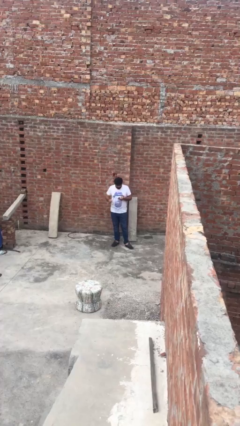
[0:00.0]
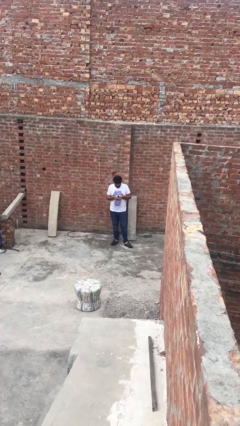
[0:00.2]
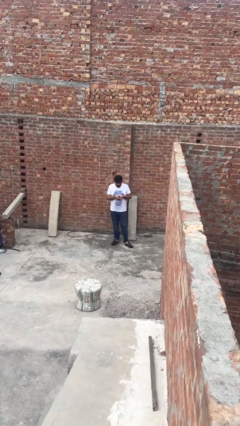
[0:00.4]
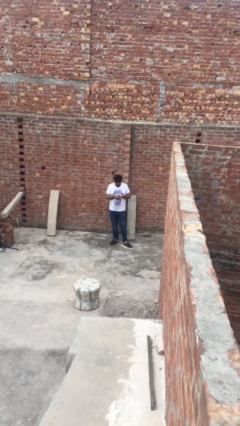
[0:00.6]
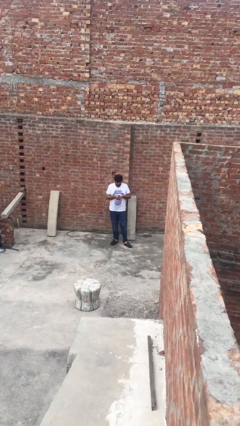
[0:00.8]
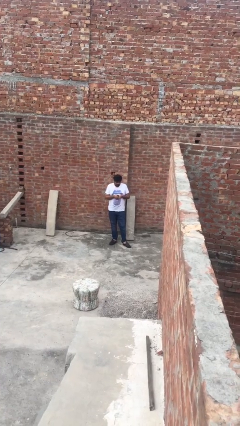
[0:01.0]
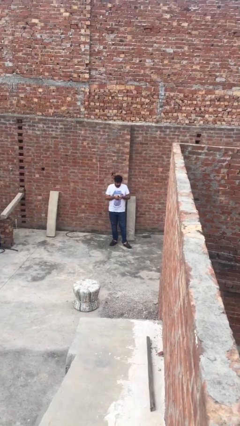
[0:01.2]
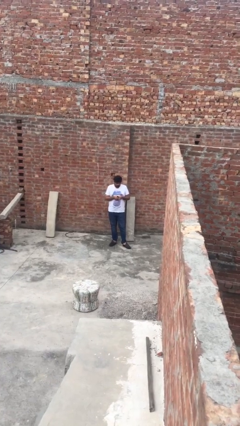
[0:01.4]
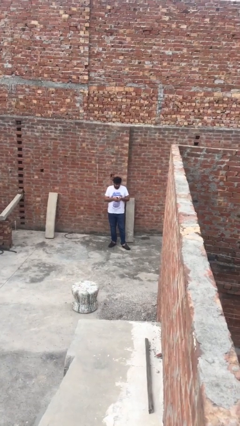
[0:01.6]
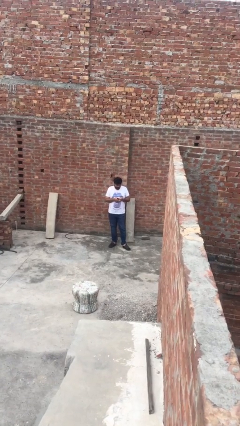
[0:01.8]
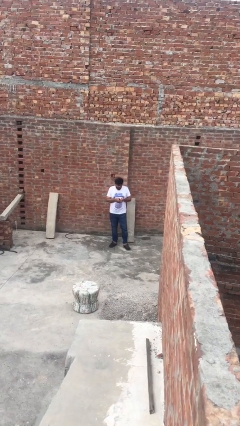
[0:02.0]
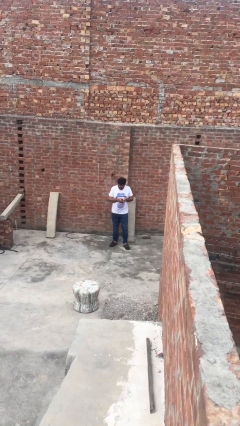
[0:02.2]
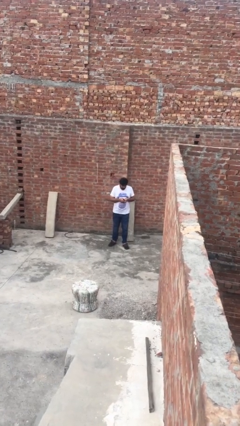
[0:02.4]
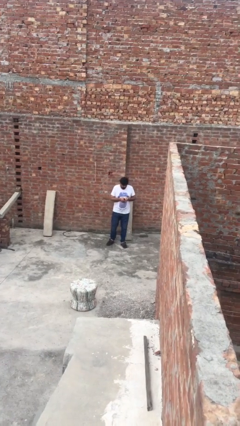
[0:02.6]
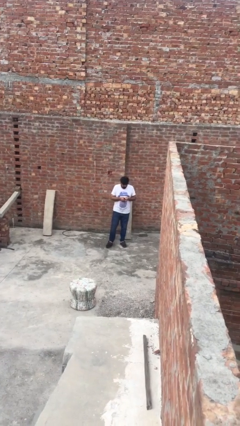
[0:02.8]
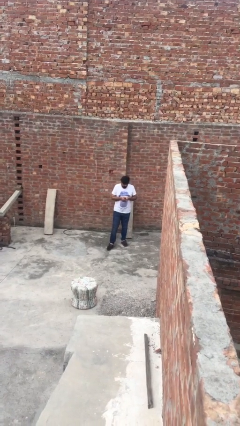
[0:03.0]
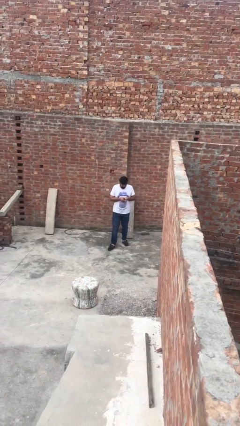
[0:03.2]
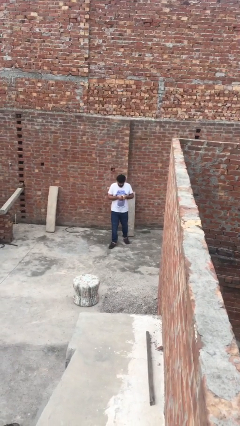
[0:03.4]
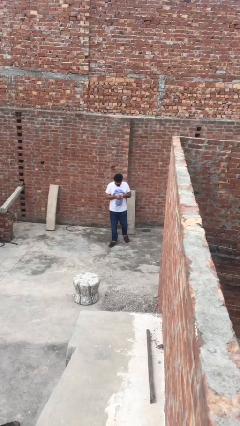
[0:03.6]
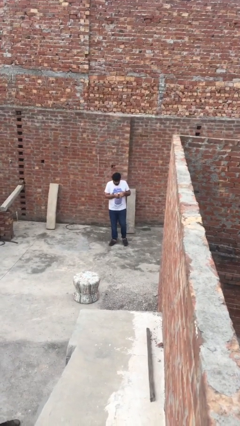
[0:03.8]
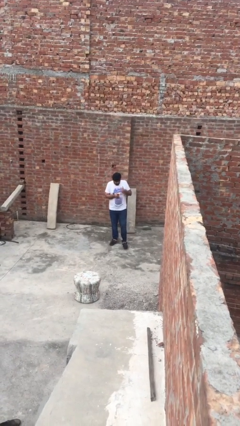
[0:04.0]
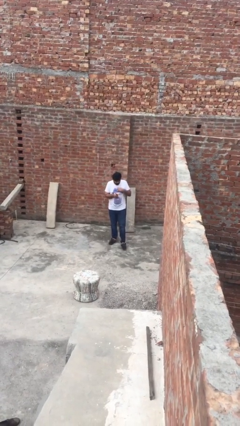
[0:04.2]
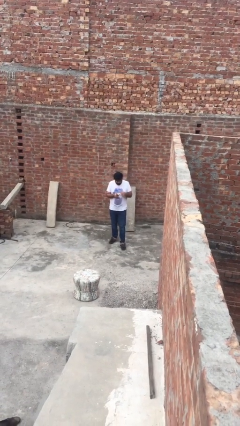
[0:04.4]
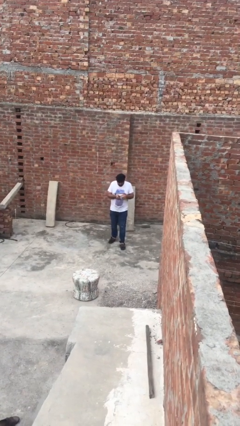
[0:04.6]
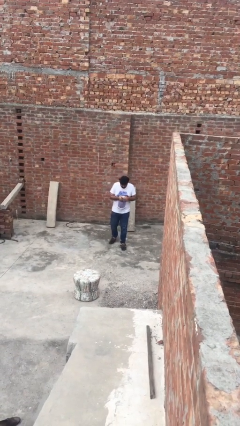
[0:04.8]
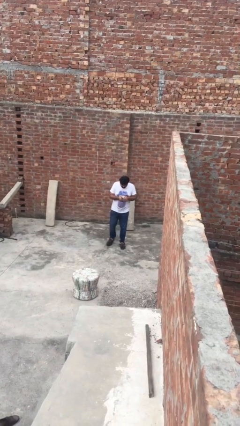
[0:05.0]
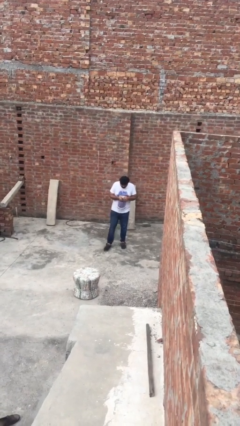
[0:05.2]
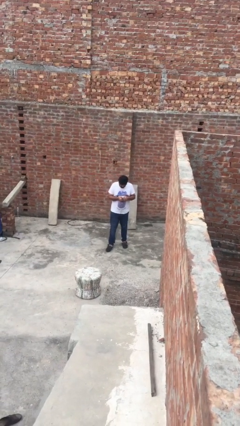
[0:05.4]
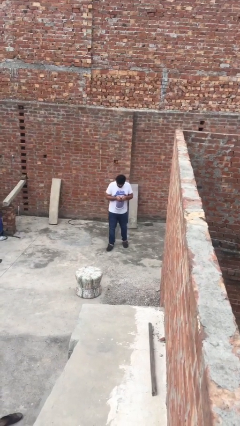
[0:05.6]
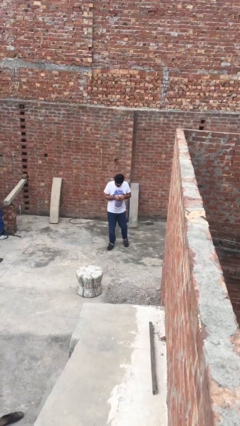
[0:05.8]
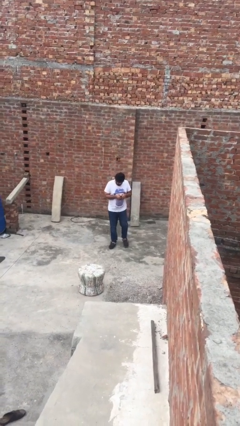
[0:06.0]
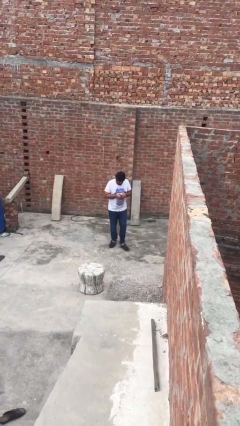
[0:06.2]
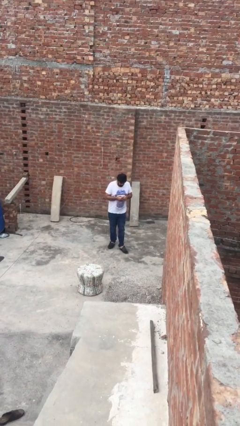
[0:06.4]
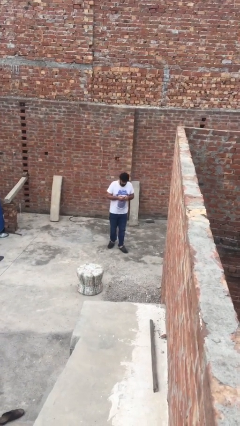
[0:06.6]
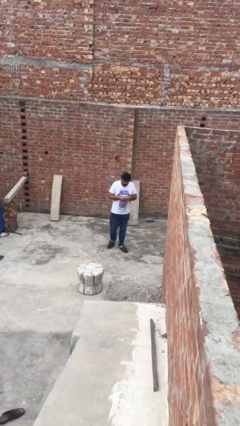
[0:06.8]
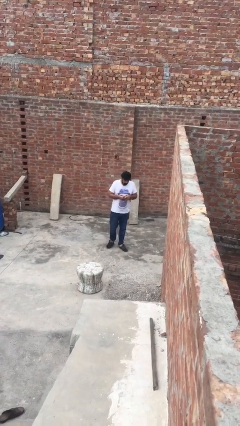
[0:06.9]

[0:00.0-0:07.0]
person texts on phone

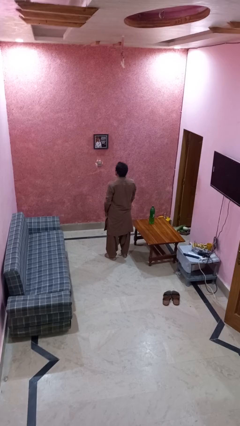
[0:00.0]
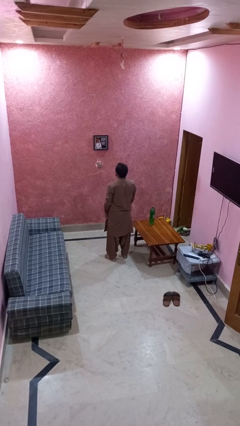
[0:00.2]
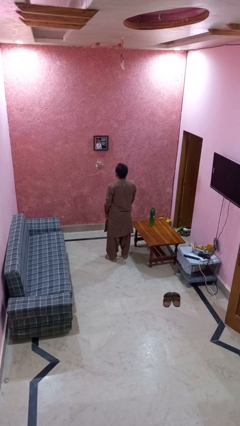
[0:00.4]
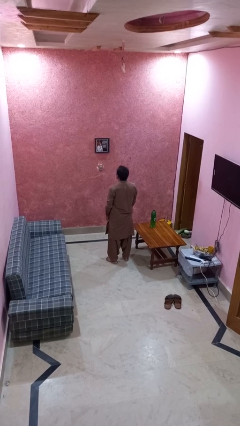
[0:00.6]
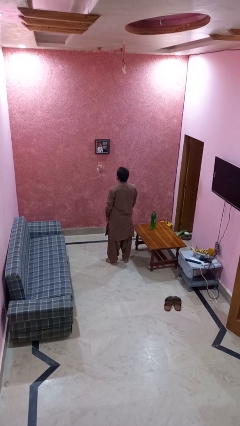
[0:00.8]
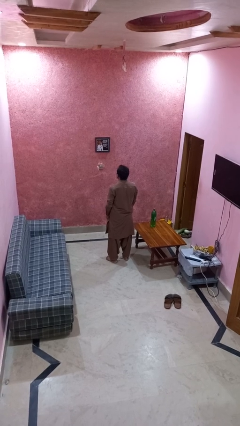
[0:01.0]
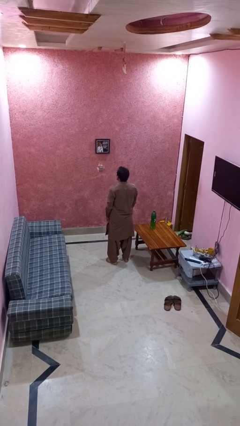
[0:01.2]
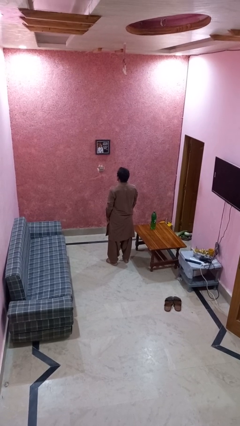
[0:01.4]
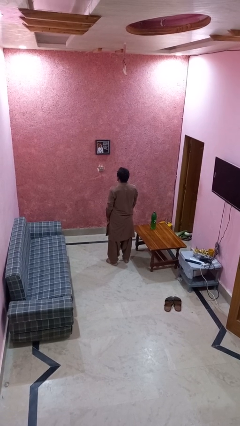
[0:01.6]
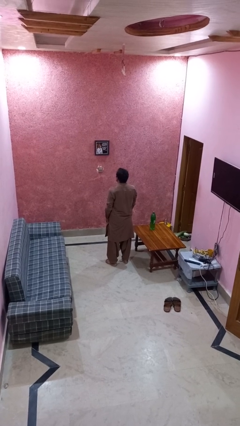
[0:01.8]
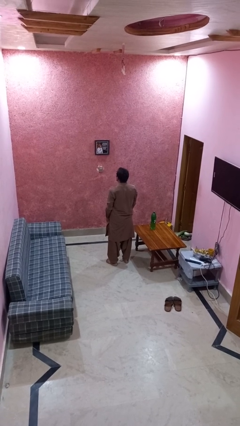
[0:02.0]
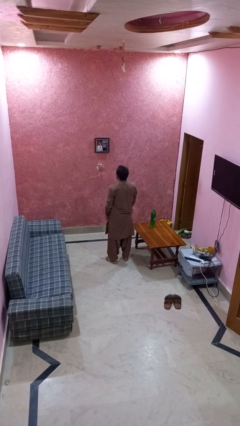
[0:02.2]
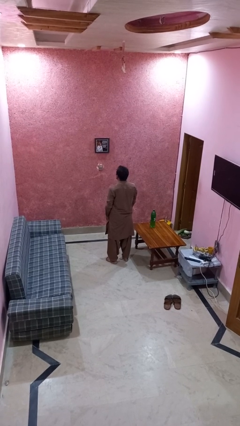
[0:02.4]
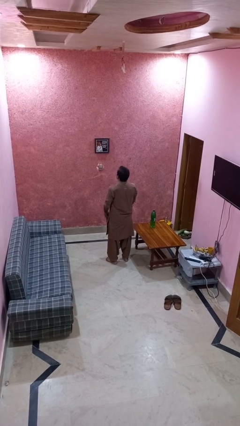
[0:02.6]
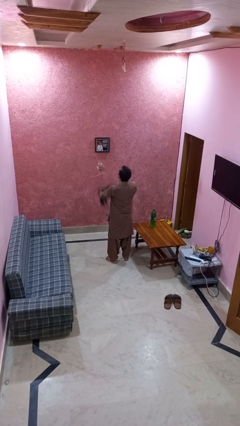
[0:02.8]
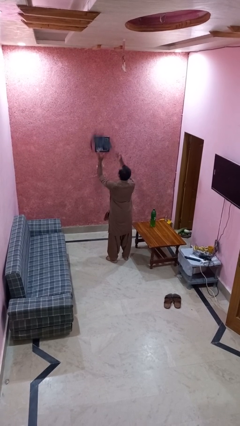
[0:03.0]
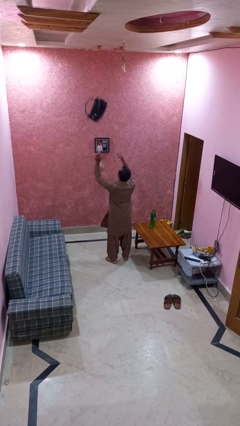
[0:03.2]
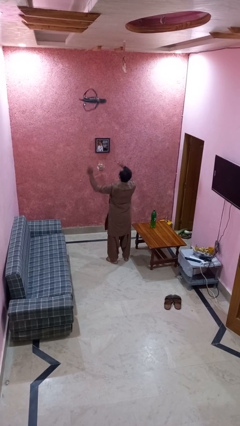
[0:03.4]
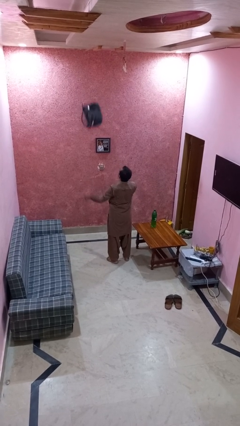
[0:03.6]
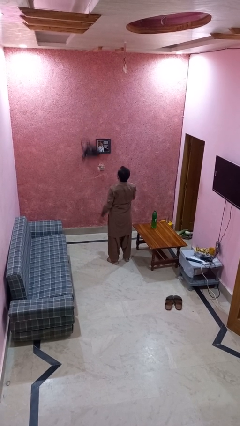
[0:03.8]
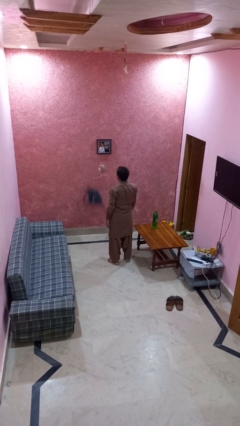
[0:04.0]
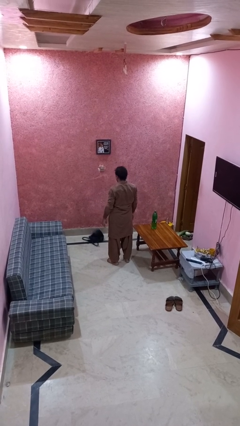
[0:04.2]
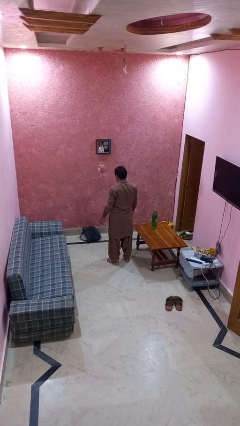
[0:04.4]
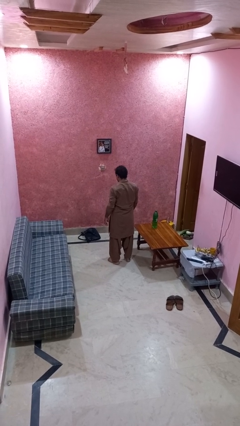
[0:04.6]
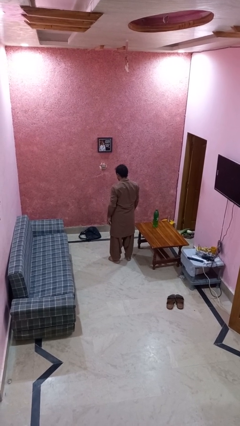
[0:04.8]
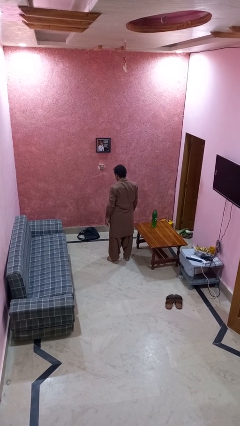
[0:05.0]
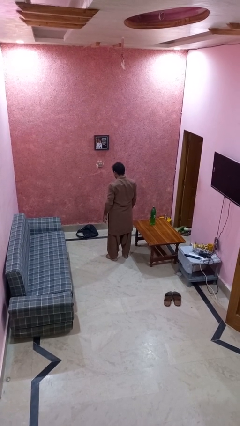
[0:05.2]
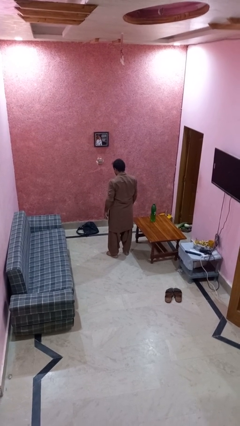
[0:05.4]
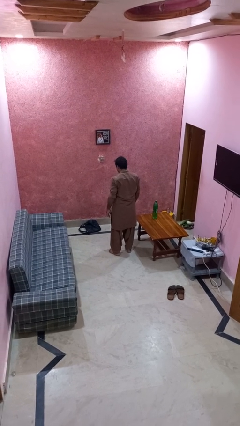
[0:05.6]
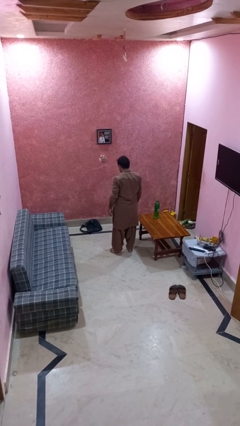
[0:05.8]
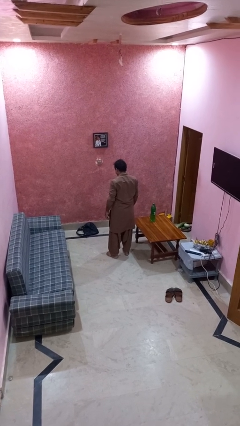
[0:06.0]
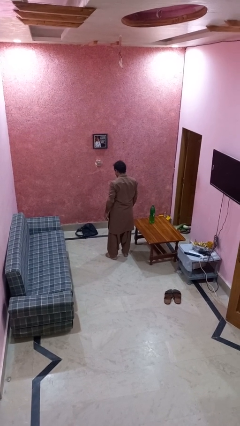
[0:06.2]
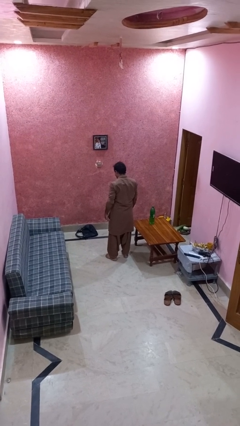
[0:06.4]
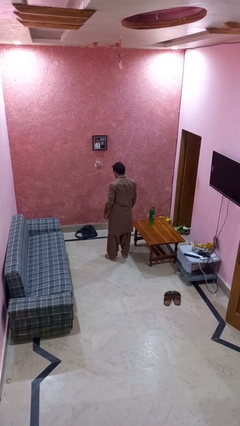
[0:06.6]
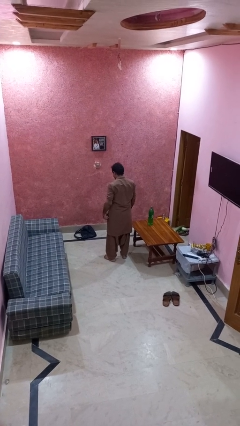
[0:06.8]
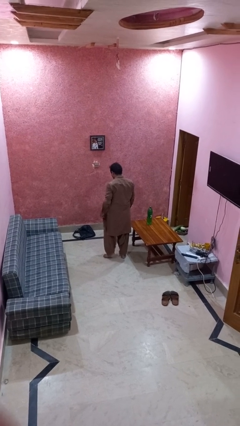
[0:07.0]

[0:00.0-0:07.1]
person throws object into air

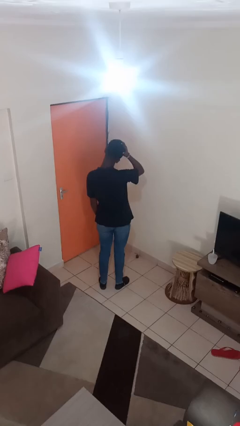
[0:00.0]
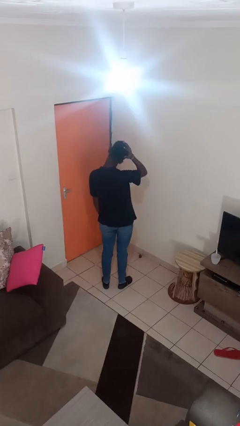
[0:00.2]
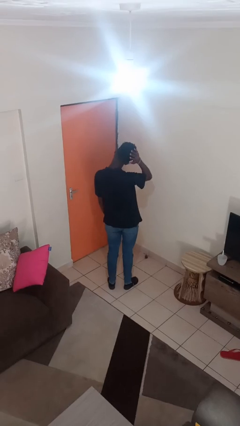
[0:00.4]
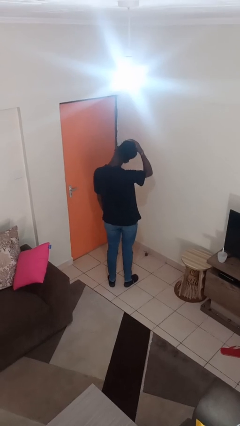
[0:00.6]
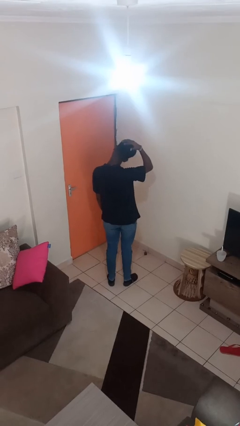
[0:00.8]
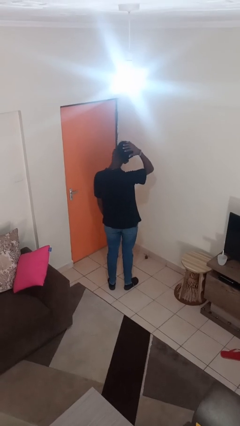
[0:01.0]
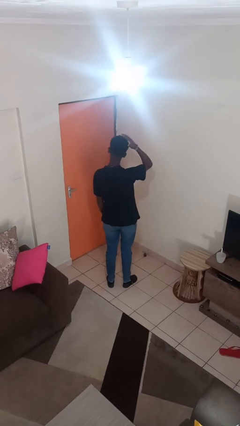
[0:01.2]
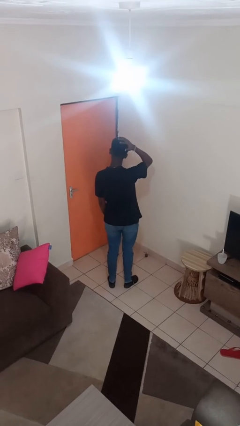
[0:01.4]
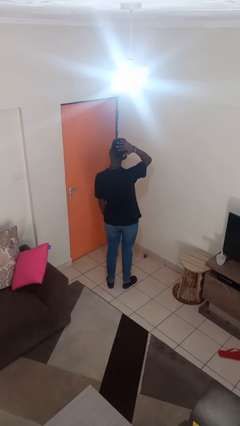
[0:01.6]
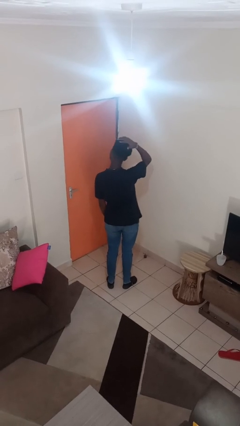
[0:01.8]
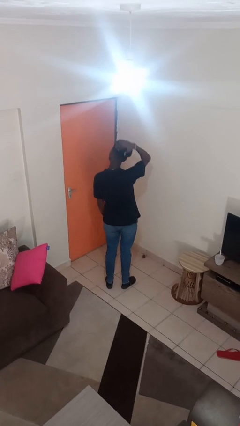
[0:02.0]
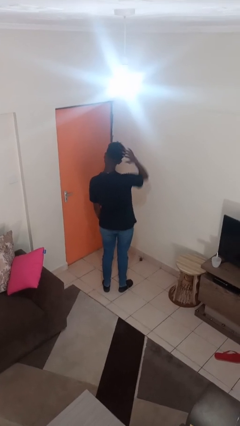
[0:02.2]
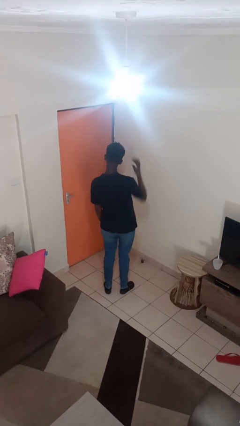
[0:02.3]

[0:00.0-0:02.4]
person strokes hair

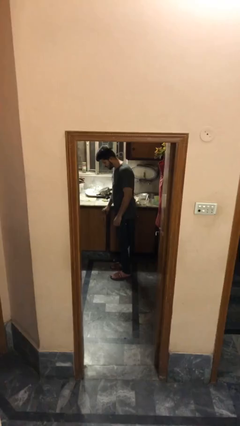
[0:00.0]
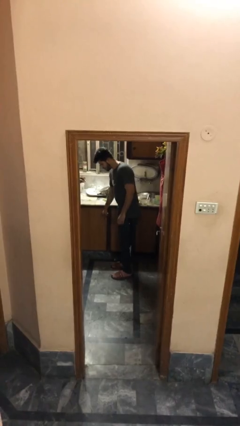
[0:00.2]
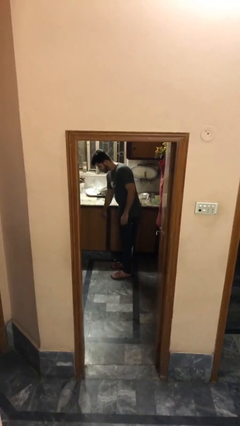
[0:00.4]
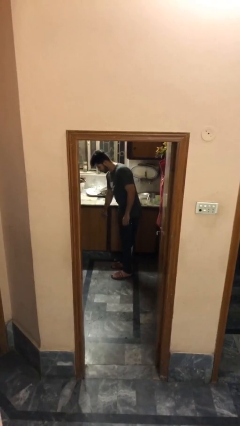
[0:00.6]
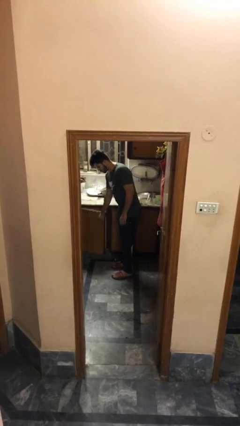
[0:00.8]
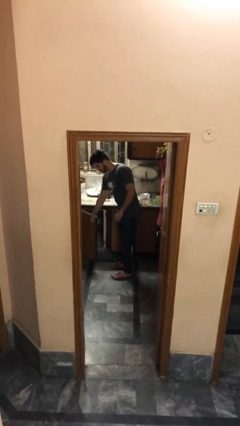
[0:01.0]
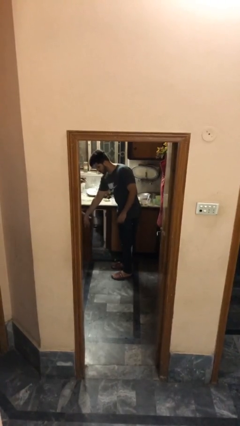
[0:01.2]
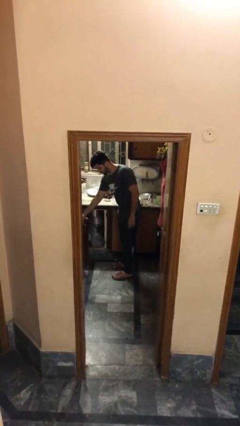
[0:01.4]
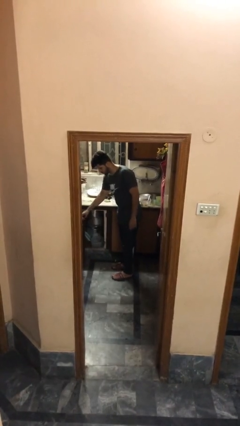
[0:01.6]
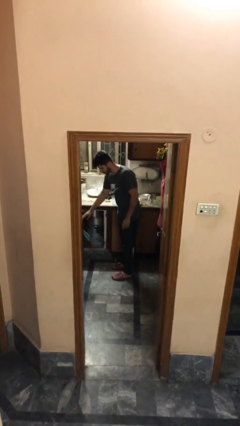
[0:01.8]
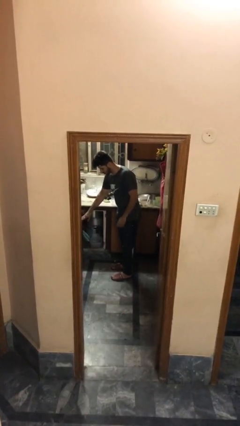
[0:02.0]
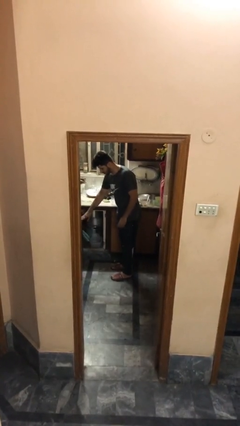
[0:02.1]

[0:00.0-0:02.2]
person opens cabinet
